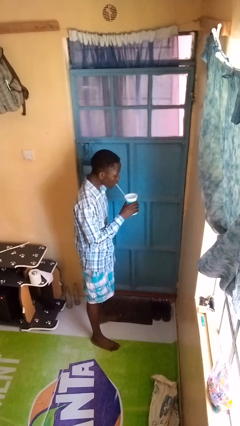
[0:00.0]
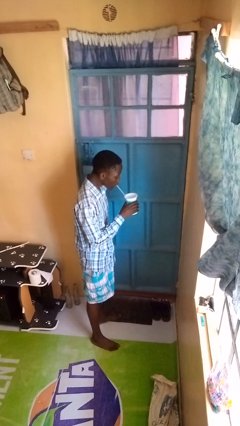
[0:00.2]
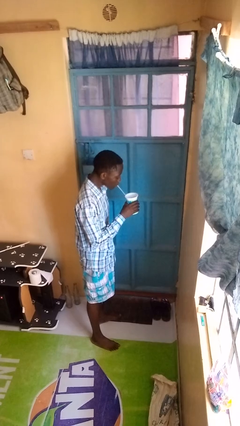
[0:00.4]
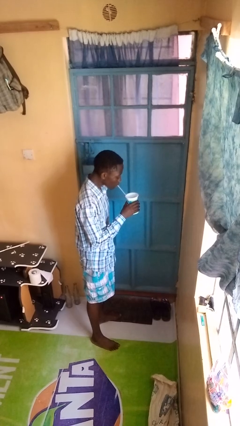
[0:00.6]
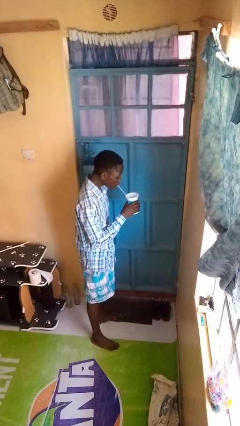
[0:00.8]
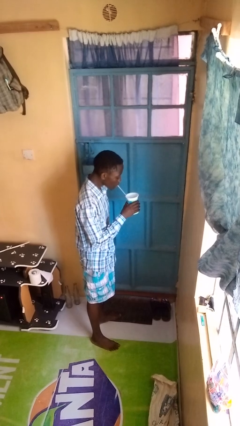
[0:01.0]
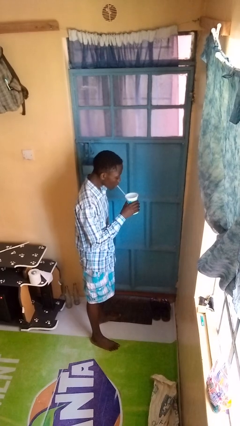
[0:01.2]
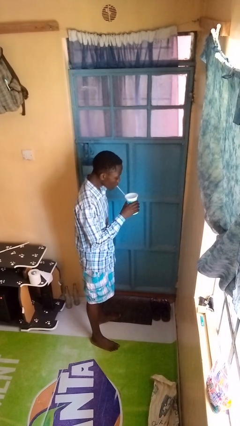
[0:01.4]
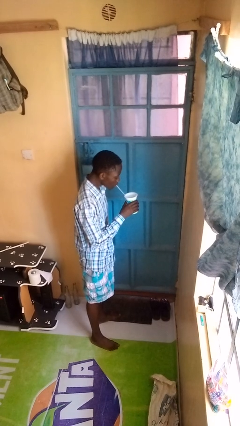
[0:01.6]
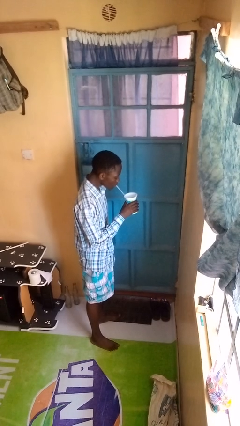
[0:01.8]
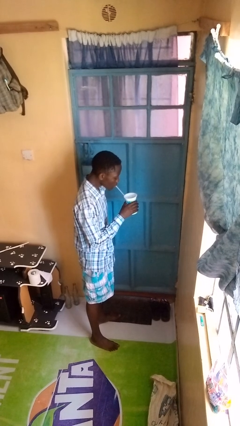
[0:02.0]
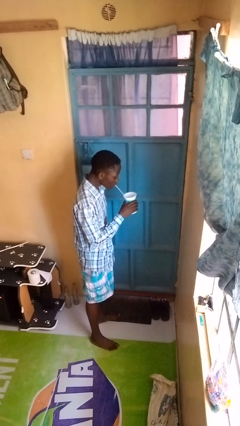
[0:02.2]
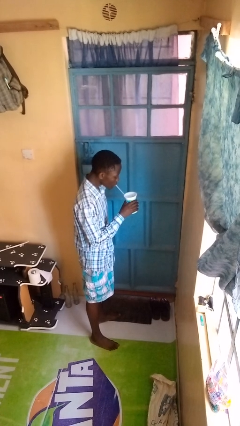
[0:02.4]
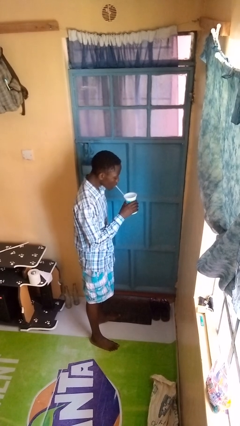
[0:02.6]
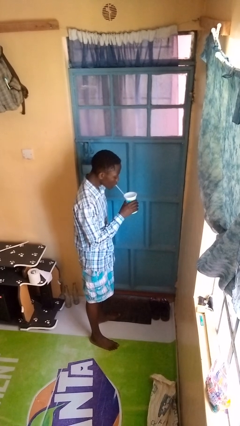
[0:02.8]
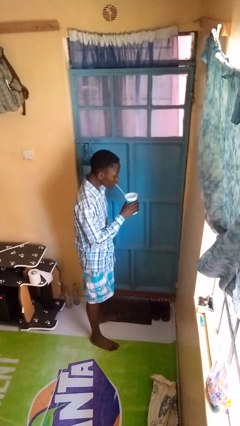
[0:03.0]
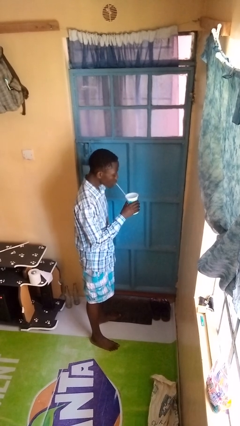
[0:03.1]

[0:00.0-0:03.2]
person drinks from straw

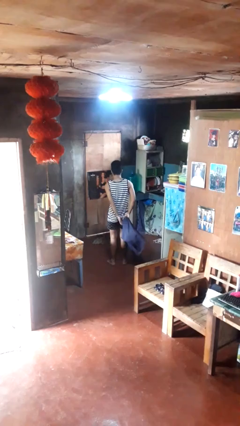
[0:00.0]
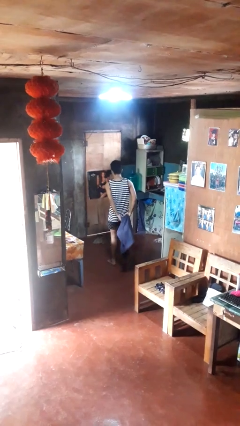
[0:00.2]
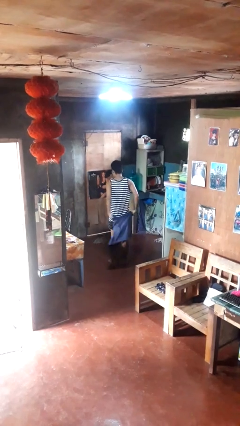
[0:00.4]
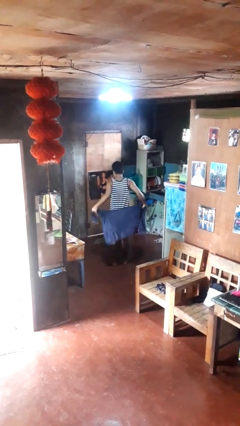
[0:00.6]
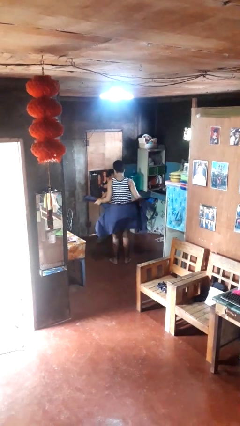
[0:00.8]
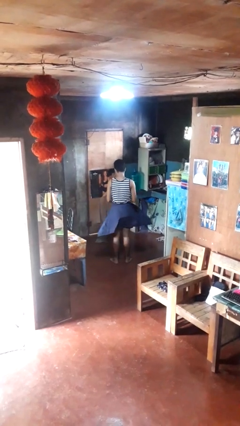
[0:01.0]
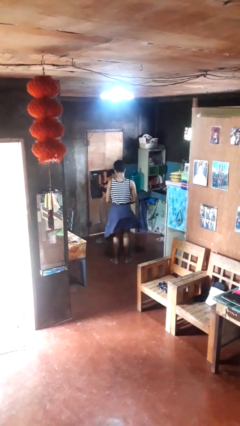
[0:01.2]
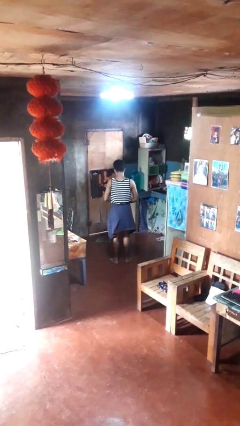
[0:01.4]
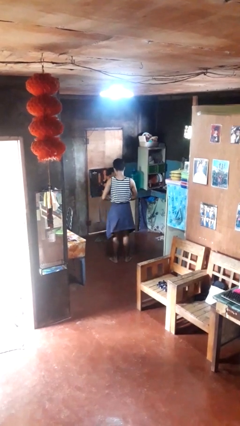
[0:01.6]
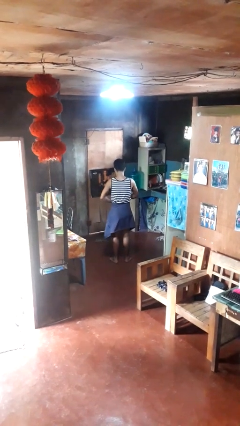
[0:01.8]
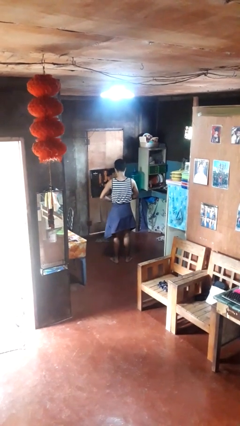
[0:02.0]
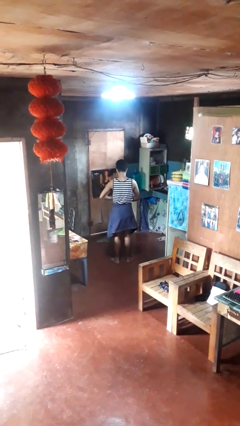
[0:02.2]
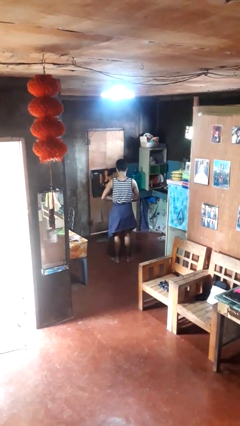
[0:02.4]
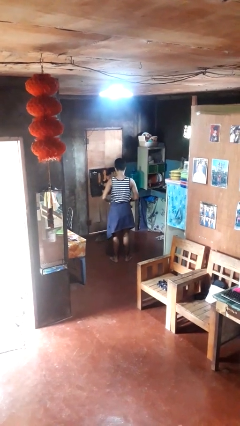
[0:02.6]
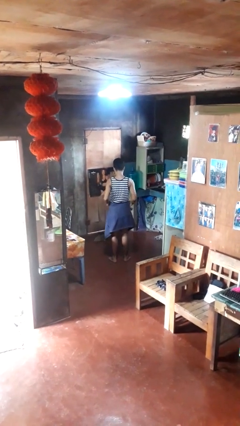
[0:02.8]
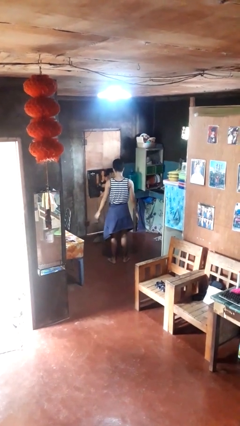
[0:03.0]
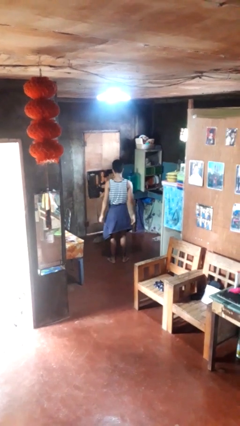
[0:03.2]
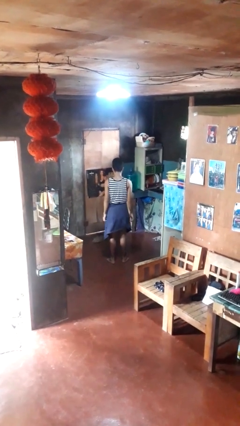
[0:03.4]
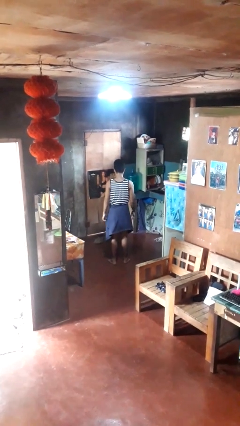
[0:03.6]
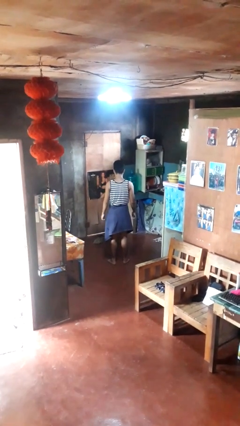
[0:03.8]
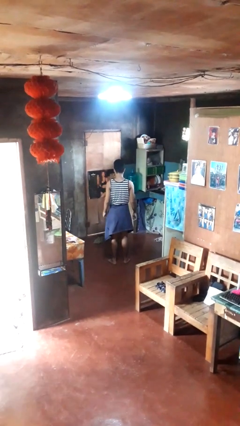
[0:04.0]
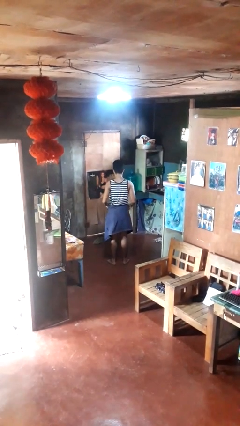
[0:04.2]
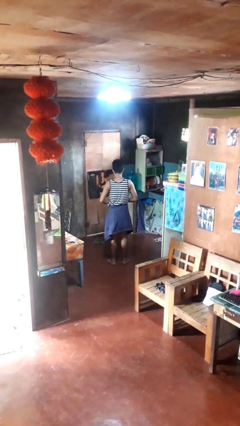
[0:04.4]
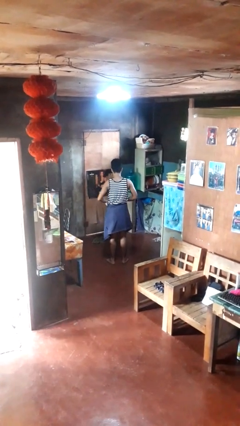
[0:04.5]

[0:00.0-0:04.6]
person ties jacket around waist

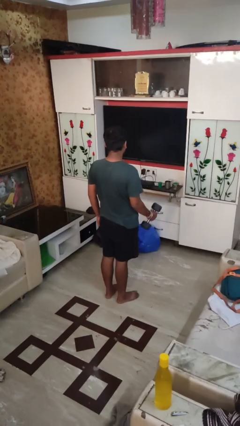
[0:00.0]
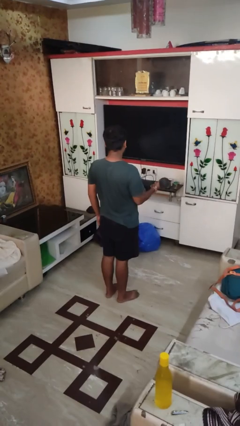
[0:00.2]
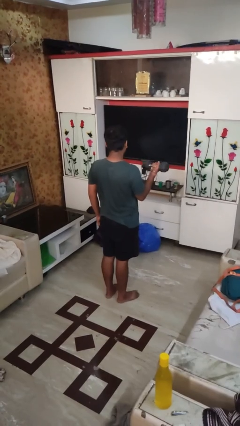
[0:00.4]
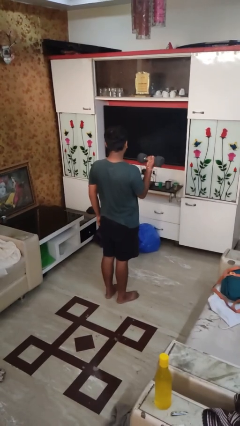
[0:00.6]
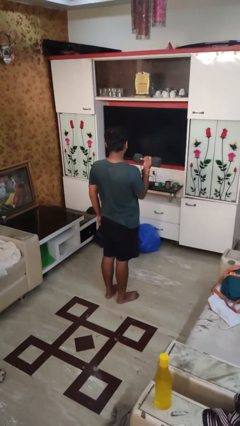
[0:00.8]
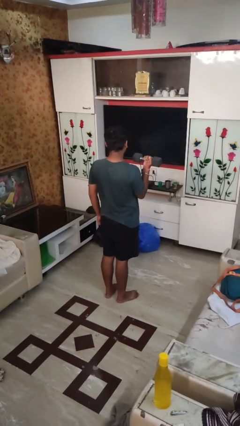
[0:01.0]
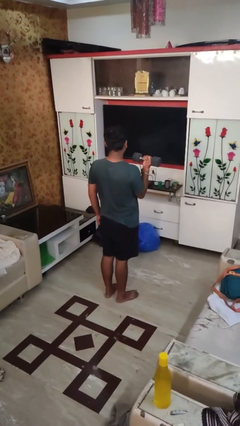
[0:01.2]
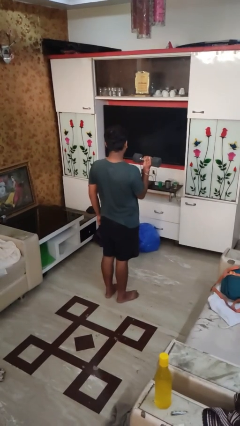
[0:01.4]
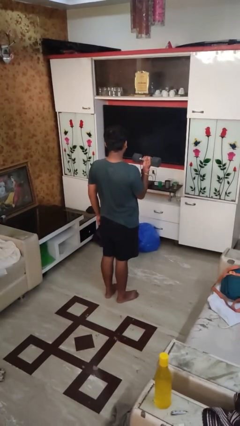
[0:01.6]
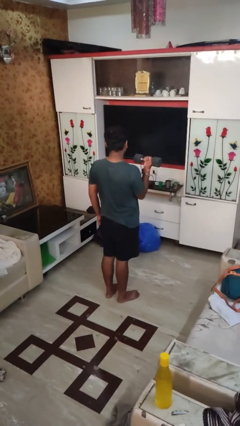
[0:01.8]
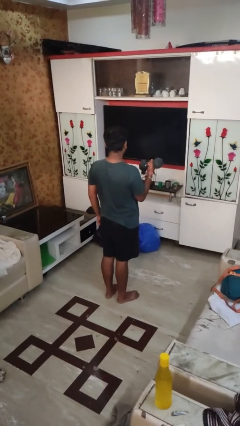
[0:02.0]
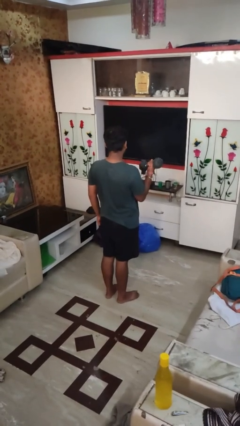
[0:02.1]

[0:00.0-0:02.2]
person lifts dumbbells

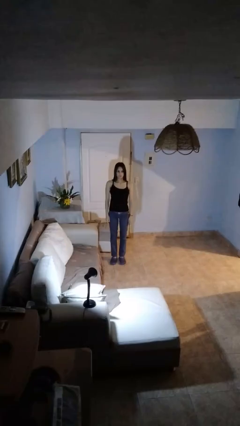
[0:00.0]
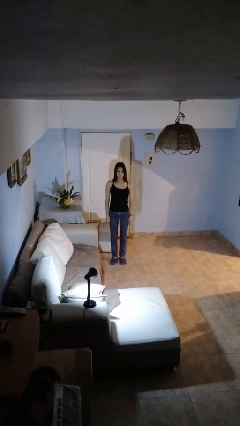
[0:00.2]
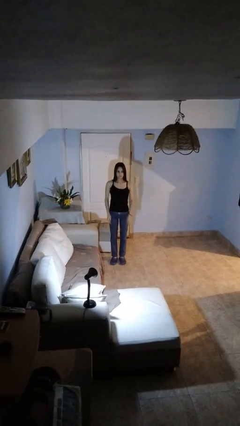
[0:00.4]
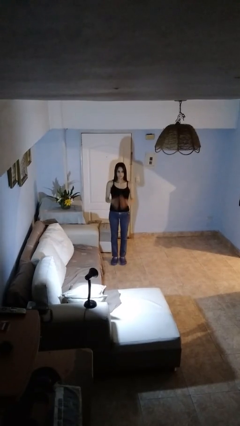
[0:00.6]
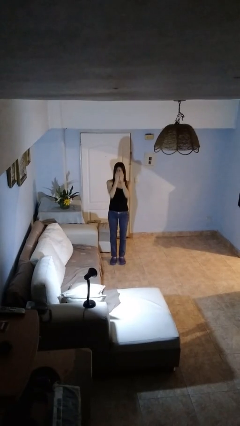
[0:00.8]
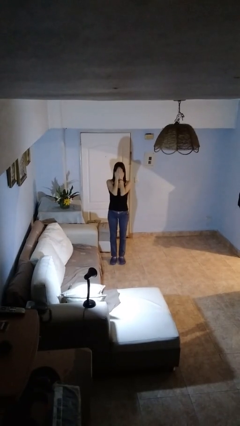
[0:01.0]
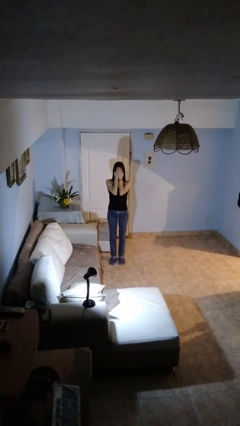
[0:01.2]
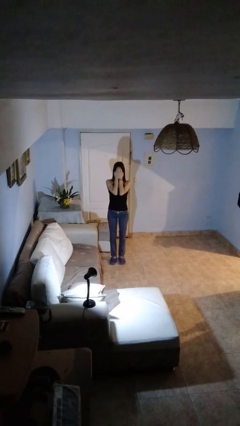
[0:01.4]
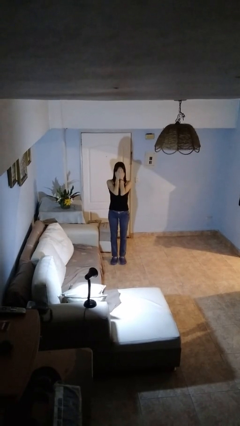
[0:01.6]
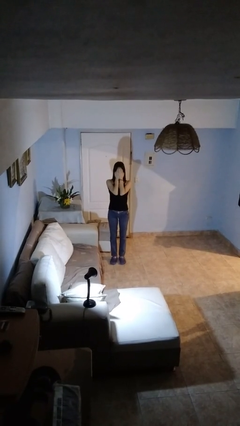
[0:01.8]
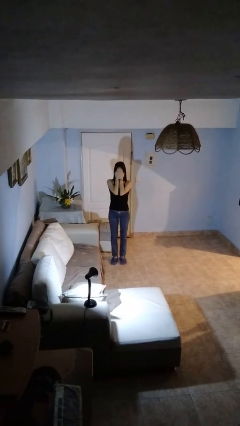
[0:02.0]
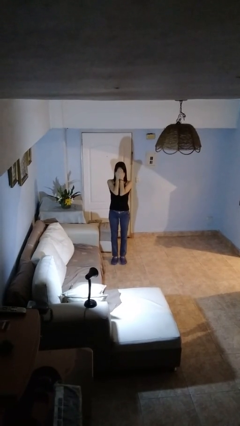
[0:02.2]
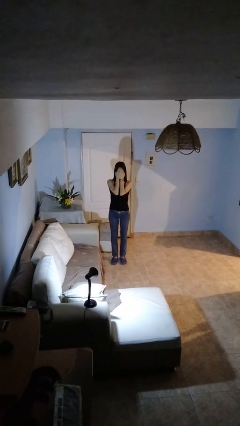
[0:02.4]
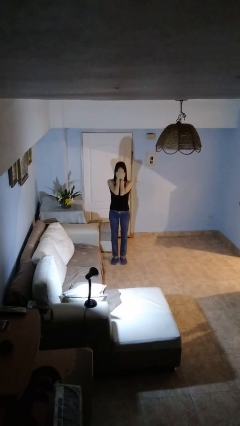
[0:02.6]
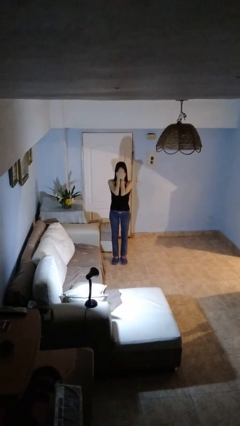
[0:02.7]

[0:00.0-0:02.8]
person covers face with hands

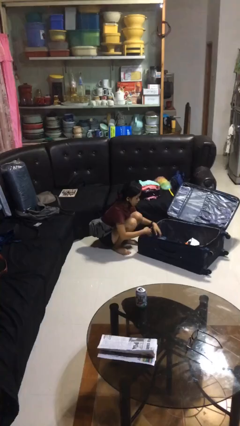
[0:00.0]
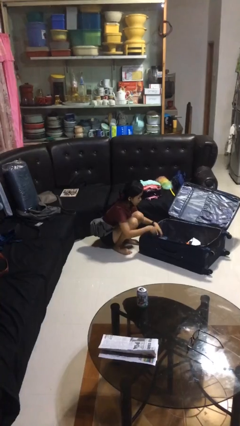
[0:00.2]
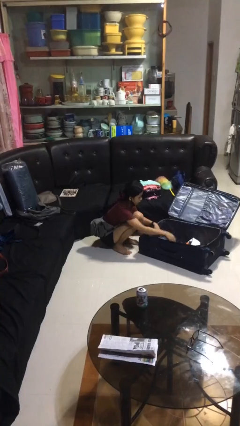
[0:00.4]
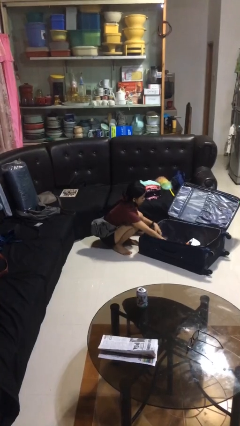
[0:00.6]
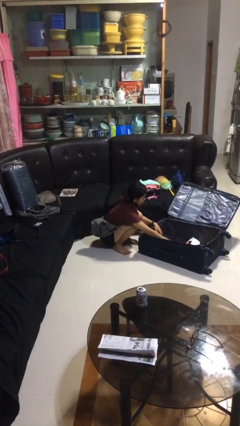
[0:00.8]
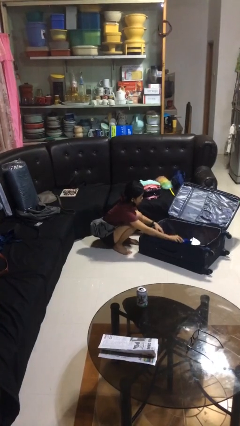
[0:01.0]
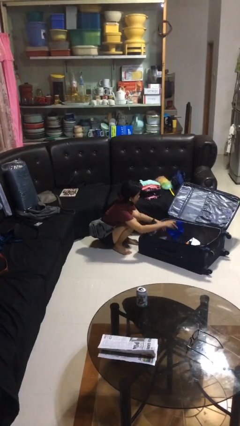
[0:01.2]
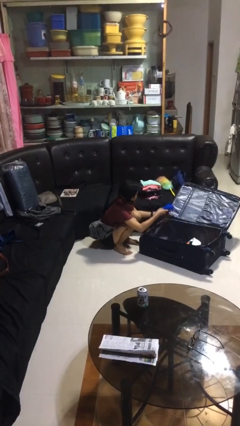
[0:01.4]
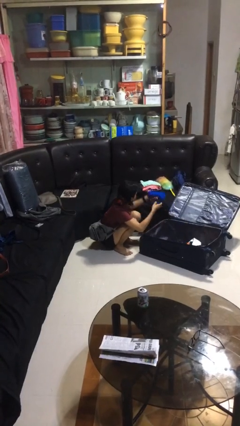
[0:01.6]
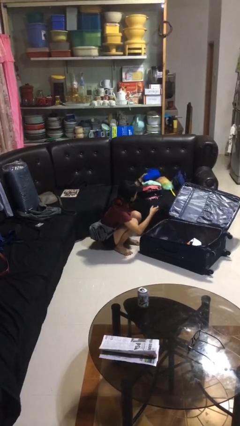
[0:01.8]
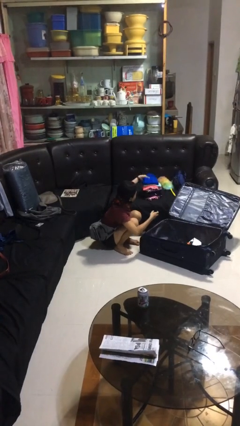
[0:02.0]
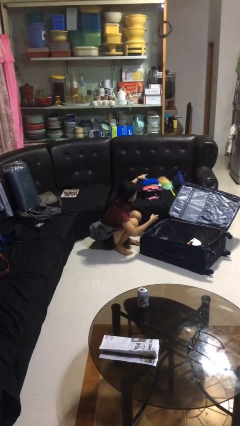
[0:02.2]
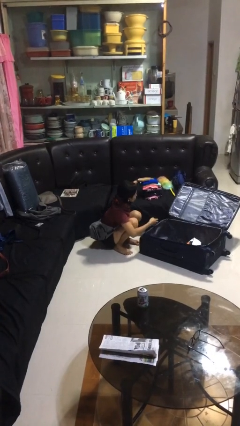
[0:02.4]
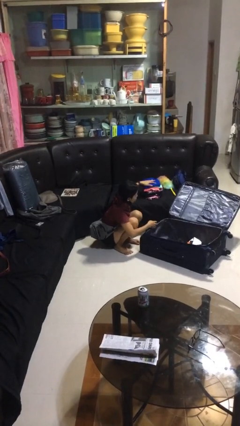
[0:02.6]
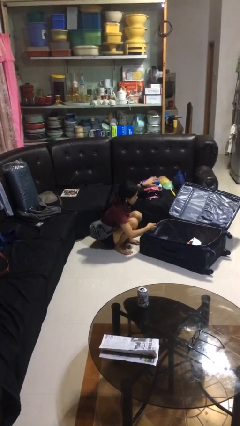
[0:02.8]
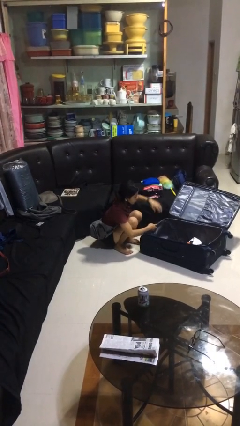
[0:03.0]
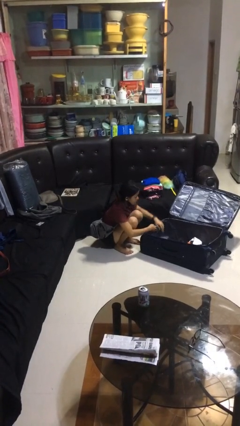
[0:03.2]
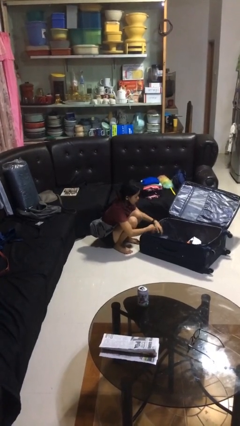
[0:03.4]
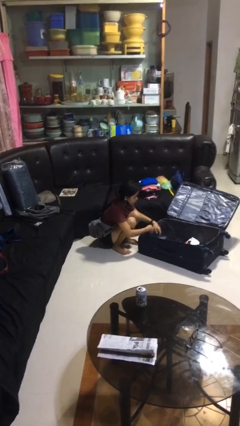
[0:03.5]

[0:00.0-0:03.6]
person loads clothes into suitcase

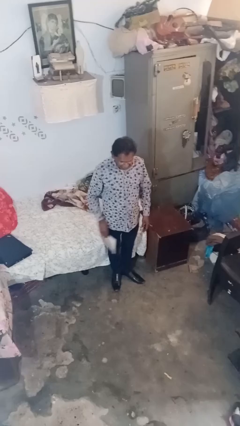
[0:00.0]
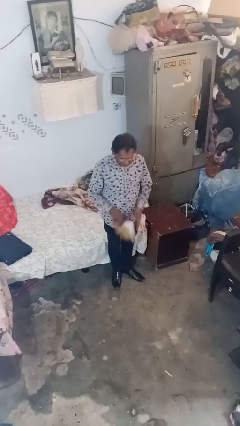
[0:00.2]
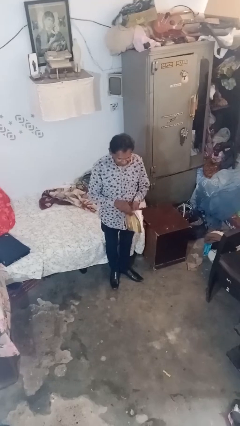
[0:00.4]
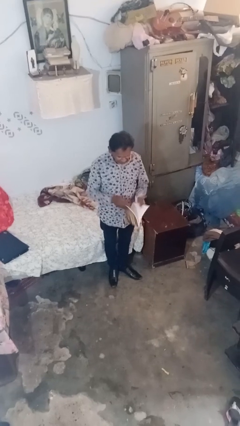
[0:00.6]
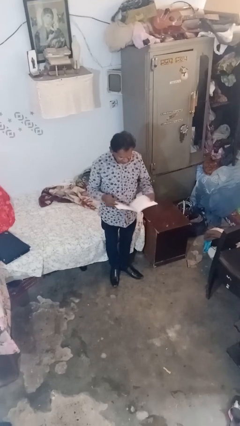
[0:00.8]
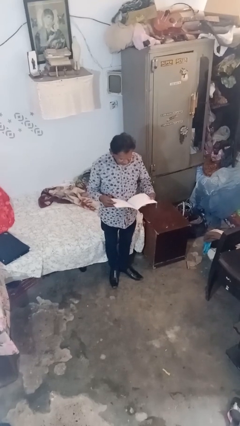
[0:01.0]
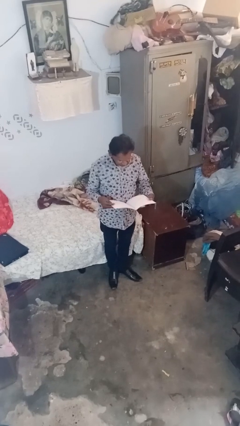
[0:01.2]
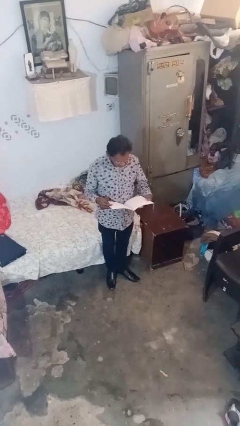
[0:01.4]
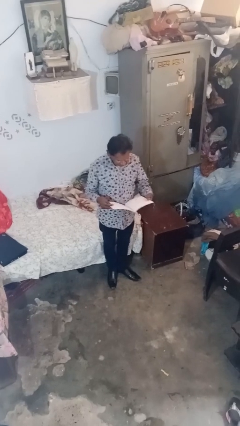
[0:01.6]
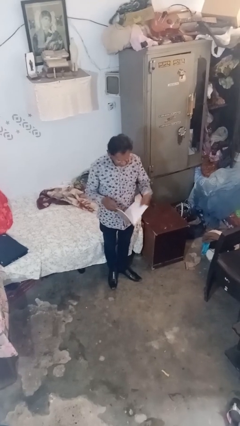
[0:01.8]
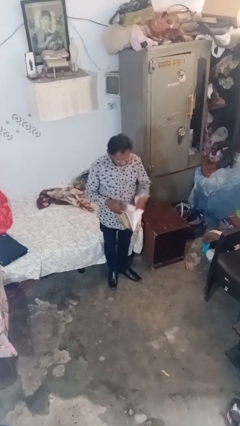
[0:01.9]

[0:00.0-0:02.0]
person reads document
